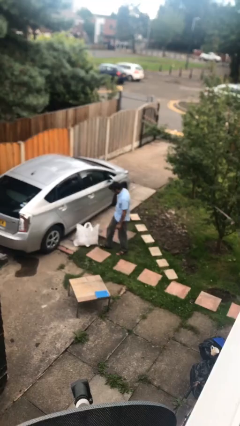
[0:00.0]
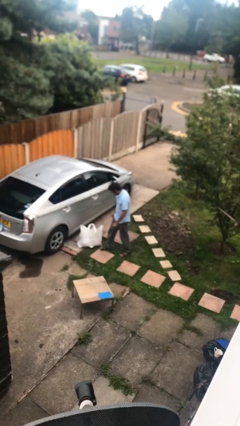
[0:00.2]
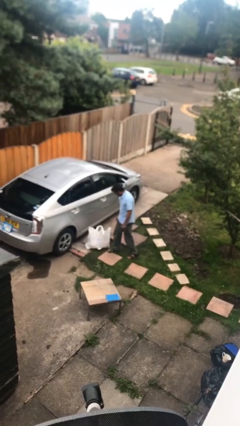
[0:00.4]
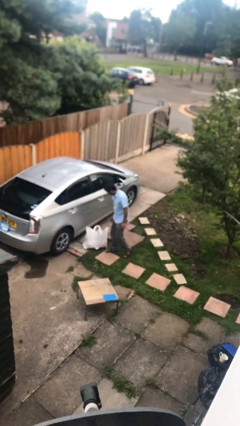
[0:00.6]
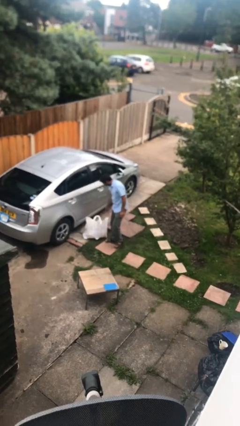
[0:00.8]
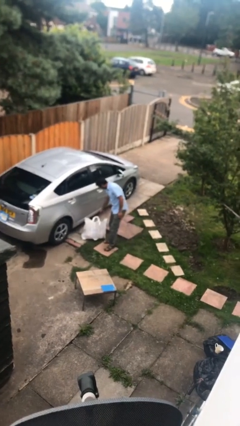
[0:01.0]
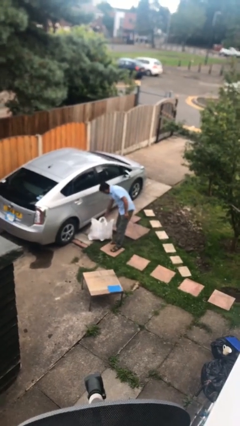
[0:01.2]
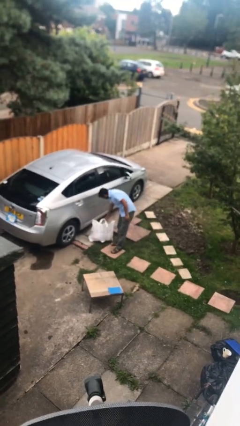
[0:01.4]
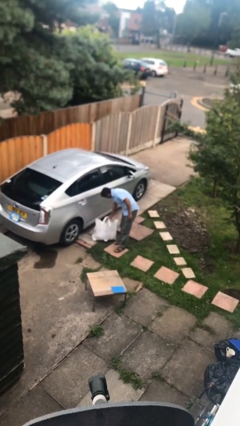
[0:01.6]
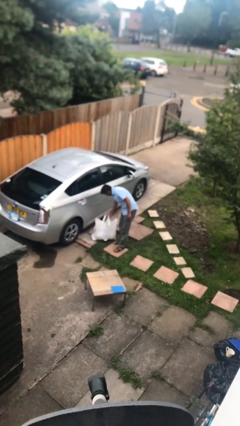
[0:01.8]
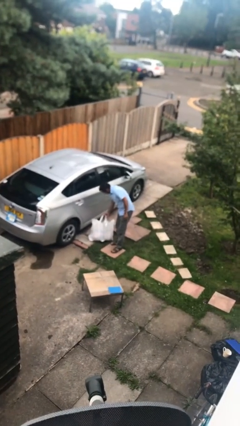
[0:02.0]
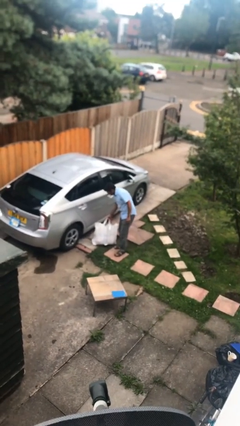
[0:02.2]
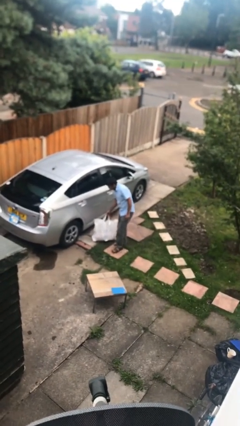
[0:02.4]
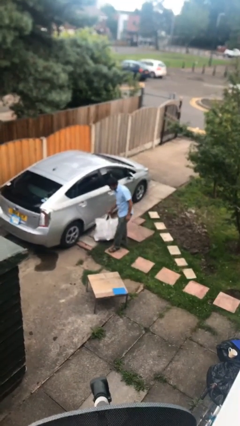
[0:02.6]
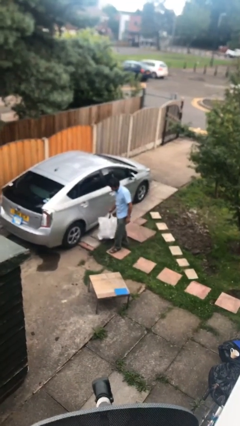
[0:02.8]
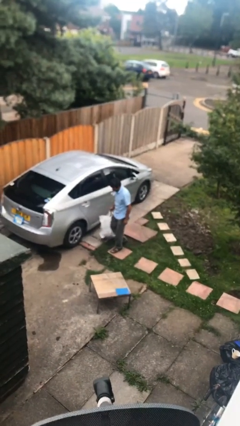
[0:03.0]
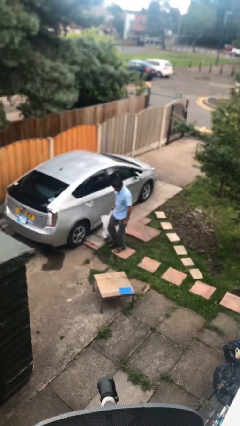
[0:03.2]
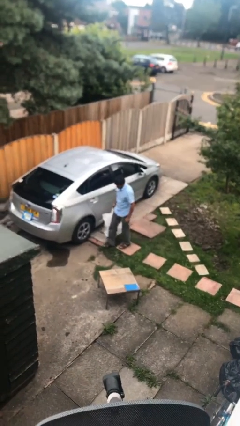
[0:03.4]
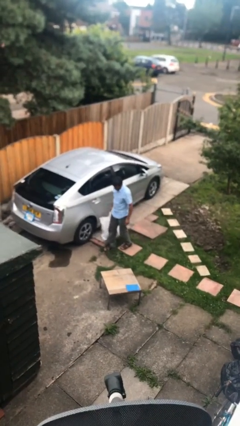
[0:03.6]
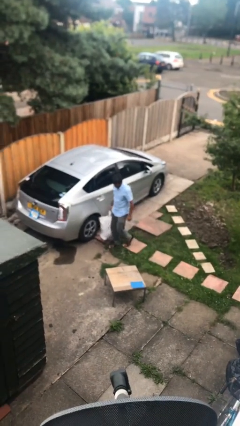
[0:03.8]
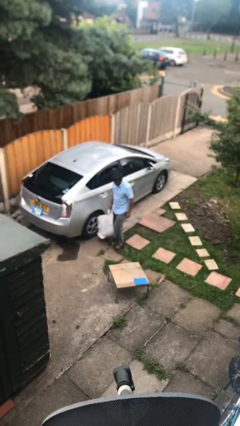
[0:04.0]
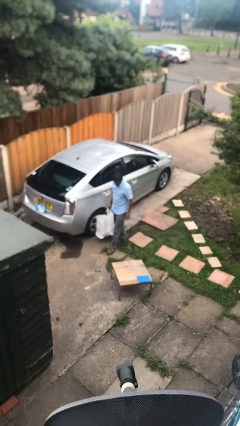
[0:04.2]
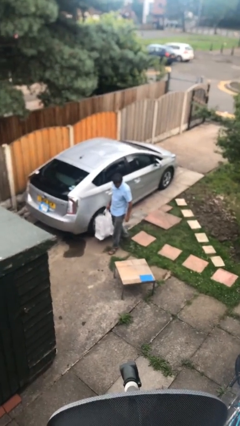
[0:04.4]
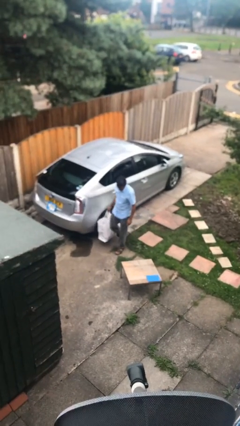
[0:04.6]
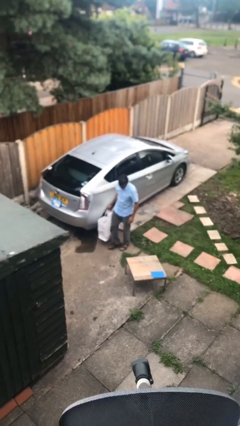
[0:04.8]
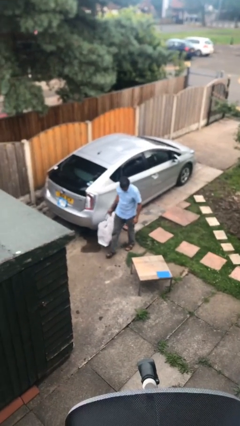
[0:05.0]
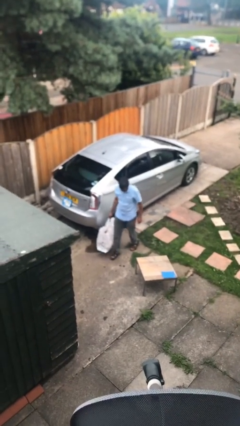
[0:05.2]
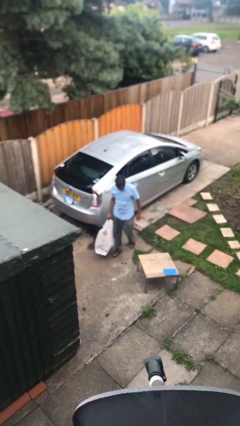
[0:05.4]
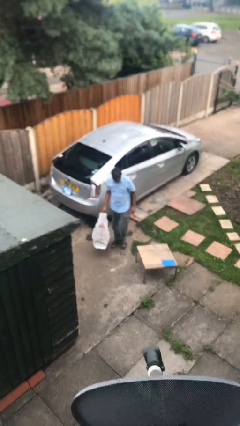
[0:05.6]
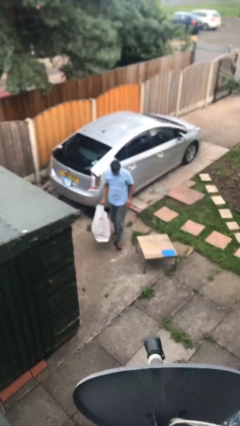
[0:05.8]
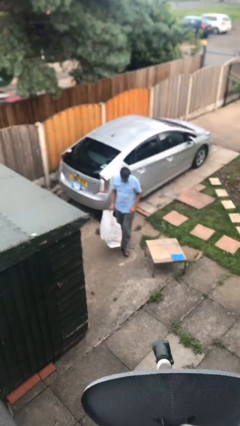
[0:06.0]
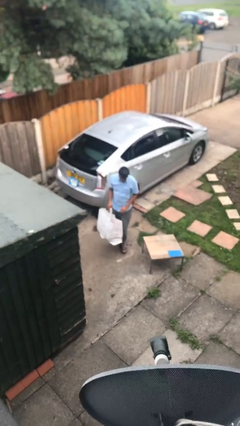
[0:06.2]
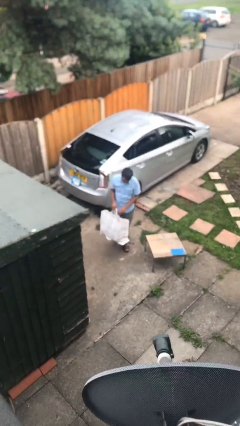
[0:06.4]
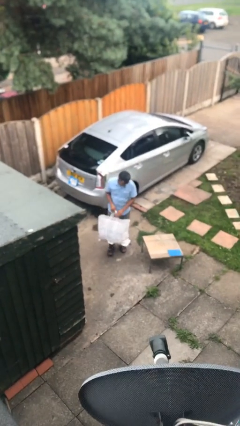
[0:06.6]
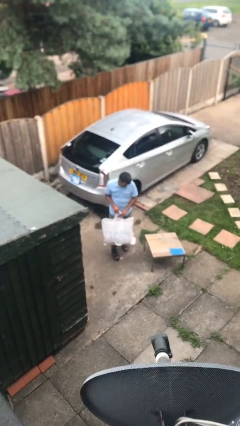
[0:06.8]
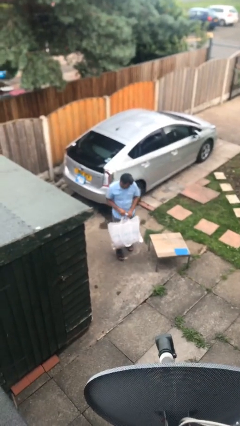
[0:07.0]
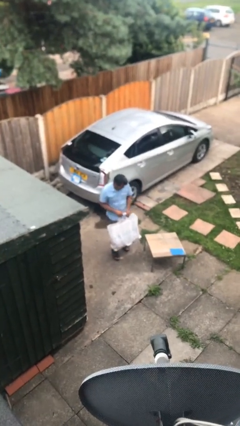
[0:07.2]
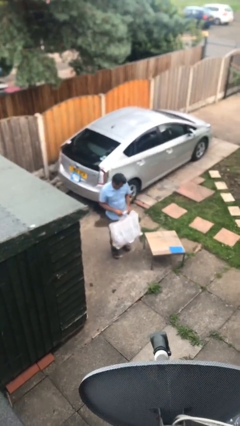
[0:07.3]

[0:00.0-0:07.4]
person picks up object from floor

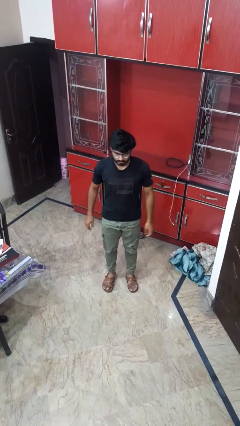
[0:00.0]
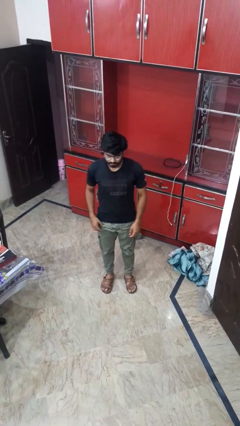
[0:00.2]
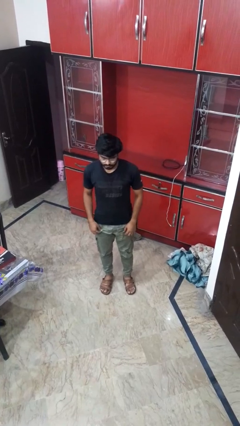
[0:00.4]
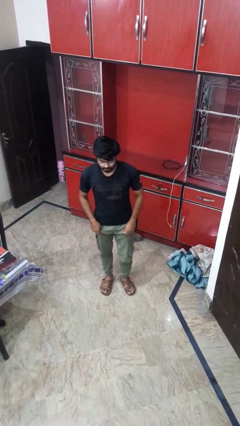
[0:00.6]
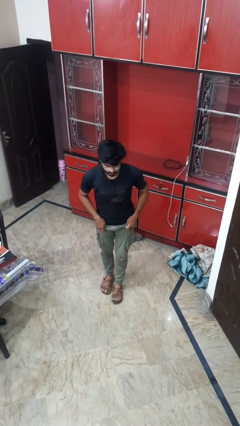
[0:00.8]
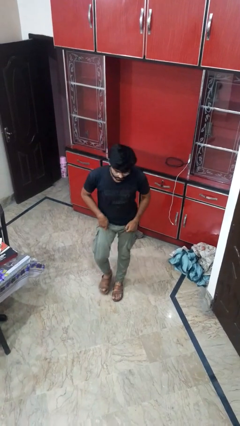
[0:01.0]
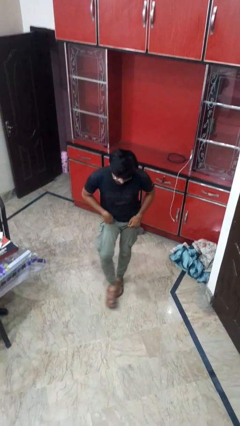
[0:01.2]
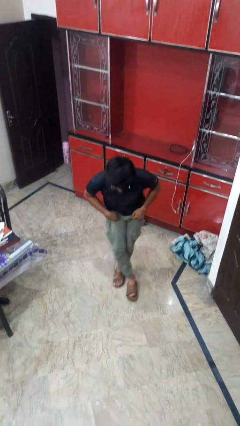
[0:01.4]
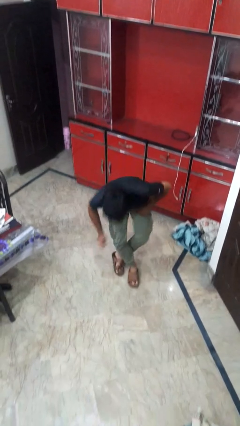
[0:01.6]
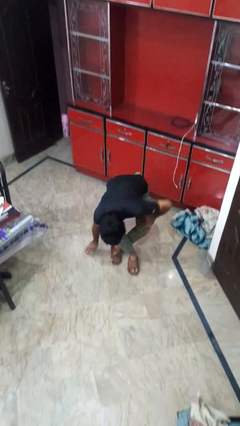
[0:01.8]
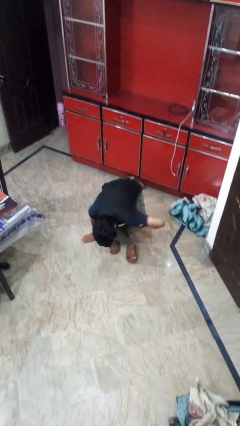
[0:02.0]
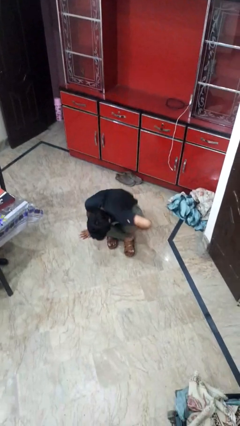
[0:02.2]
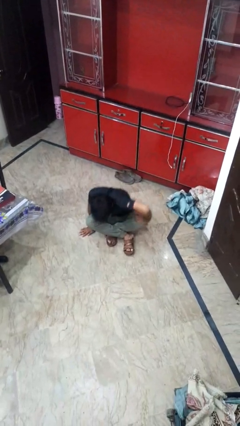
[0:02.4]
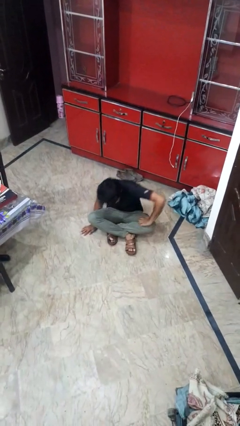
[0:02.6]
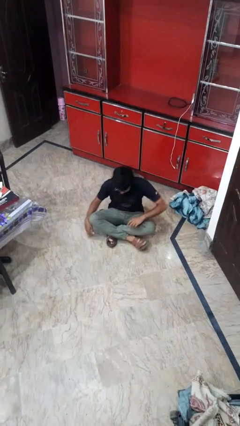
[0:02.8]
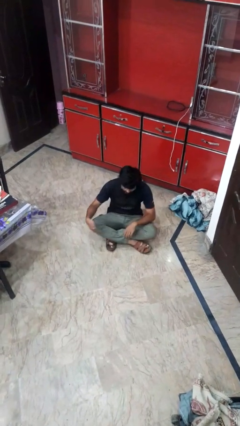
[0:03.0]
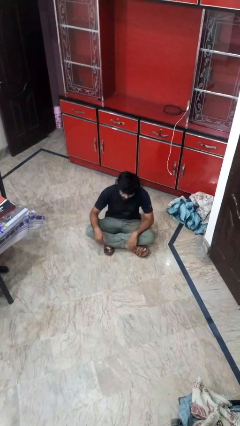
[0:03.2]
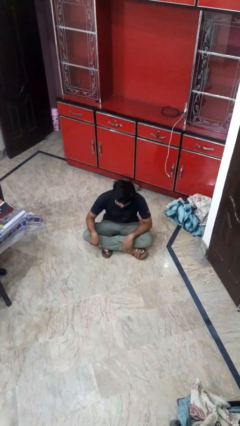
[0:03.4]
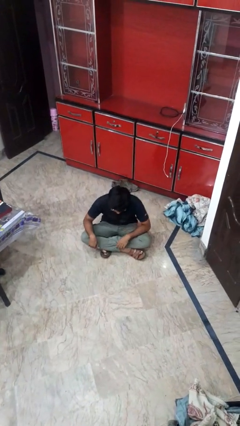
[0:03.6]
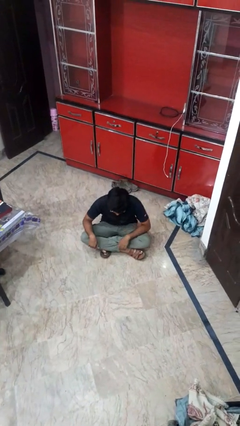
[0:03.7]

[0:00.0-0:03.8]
person sits crisscross

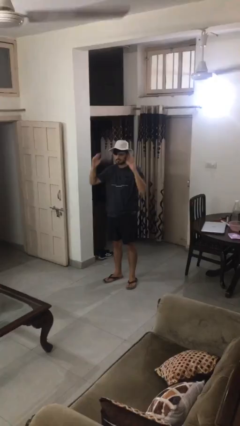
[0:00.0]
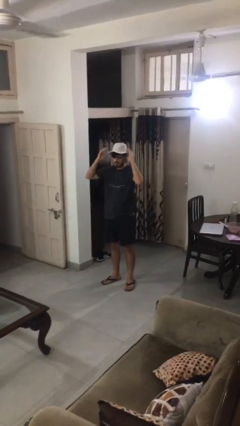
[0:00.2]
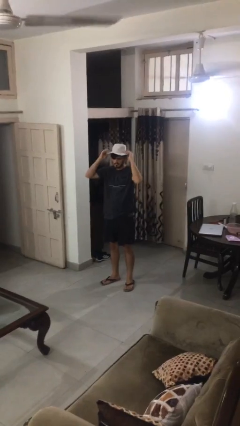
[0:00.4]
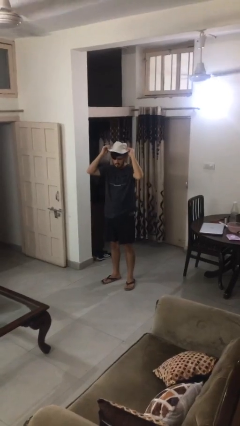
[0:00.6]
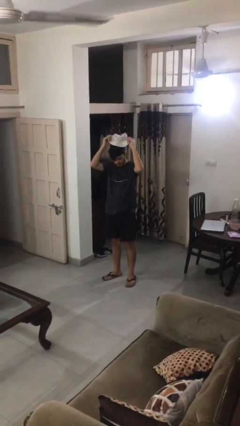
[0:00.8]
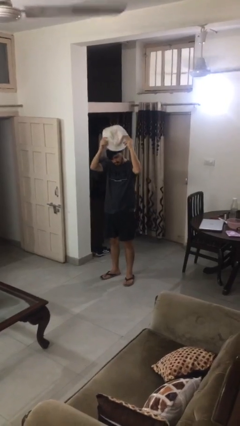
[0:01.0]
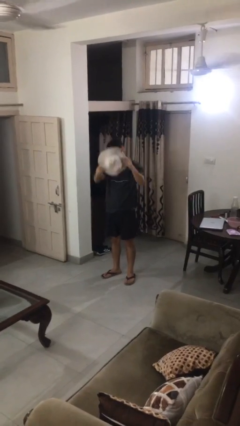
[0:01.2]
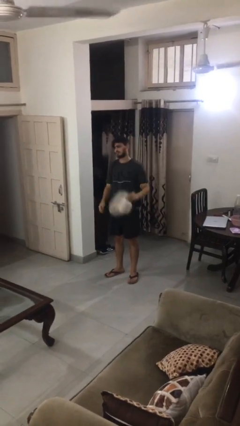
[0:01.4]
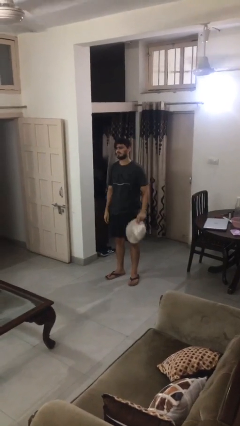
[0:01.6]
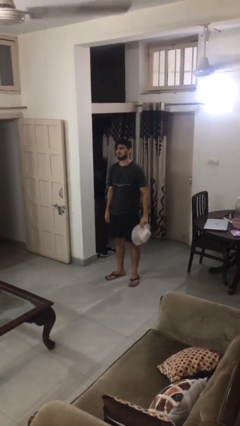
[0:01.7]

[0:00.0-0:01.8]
person takes off hat

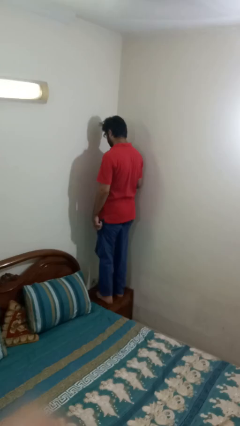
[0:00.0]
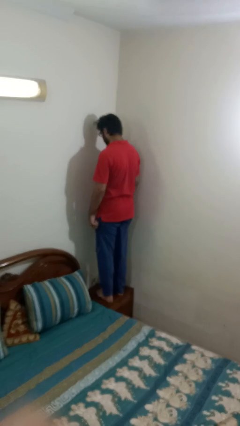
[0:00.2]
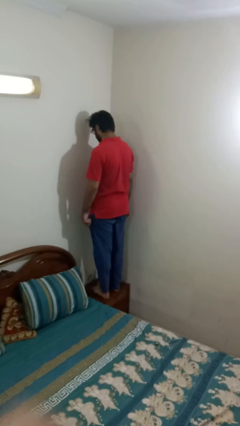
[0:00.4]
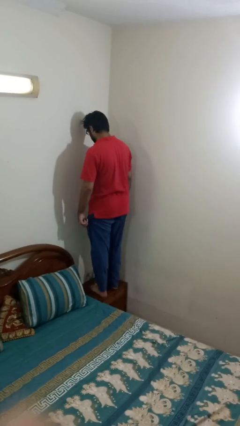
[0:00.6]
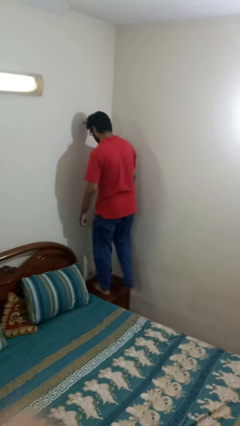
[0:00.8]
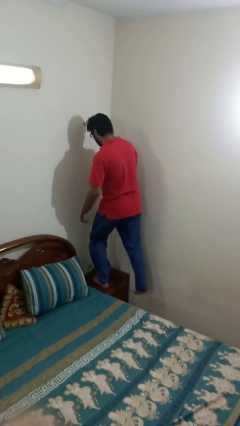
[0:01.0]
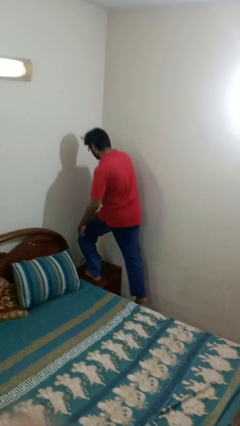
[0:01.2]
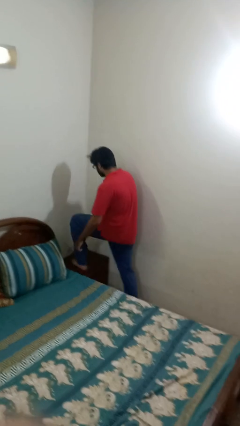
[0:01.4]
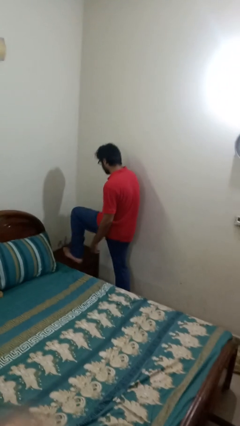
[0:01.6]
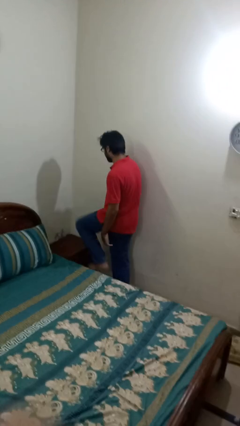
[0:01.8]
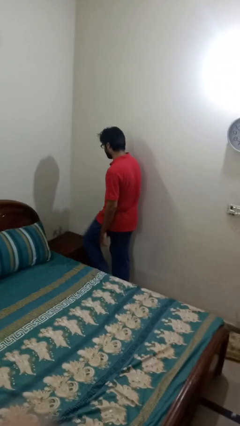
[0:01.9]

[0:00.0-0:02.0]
person climbs off table

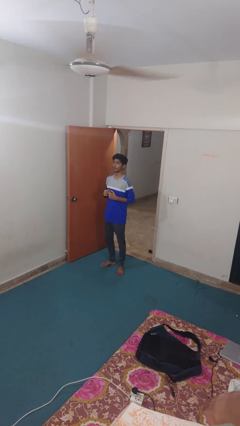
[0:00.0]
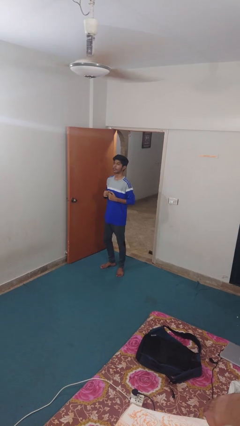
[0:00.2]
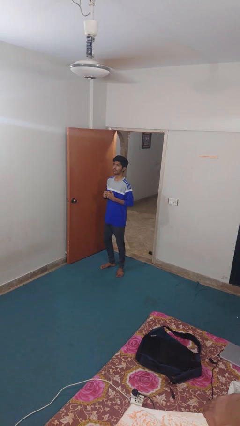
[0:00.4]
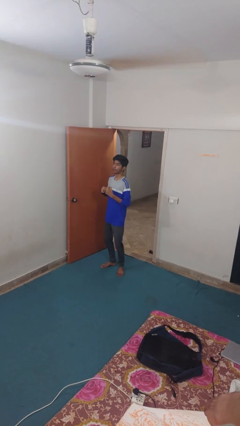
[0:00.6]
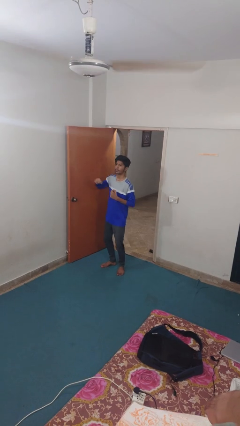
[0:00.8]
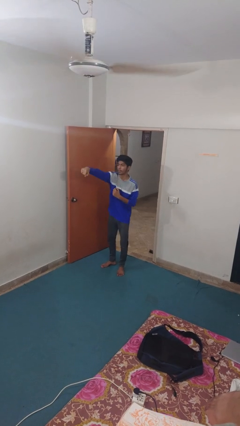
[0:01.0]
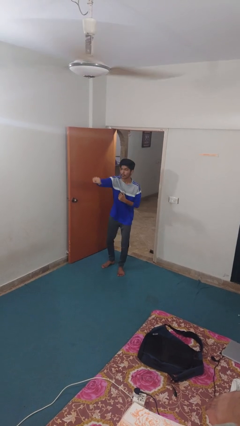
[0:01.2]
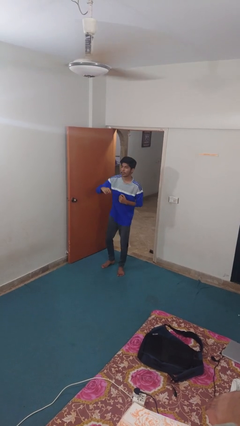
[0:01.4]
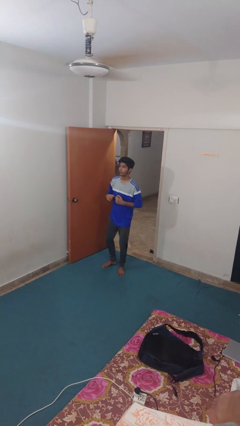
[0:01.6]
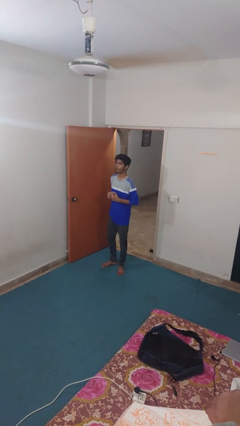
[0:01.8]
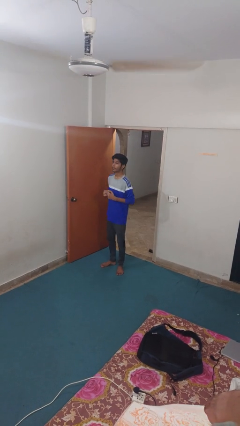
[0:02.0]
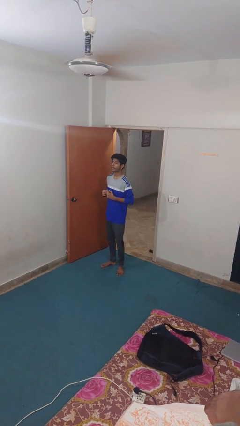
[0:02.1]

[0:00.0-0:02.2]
person punches

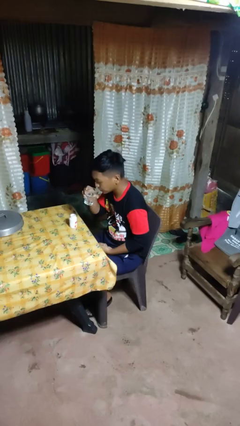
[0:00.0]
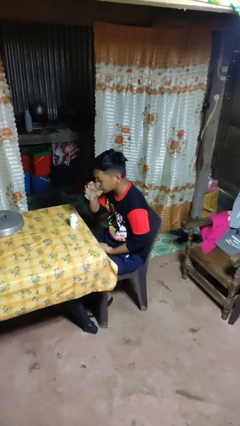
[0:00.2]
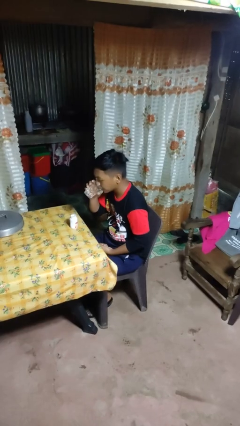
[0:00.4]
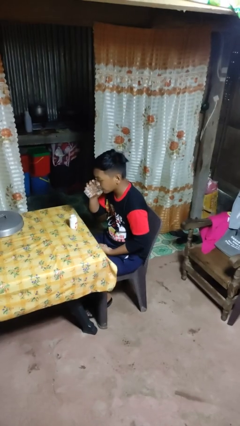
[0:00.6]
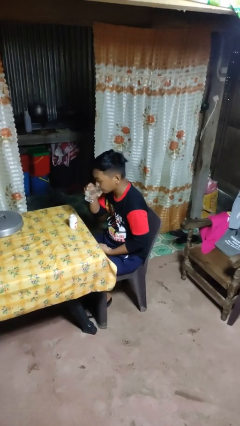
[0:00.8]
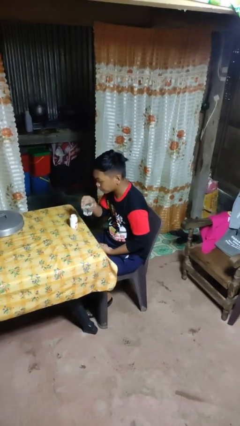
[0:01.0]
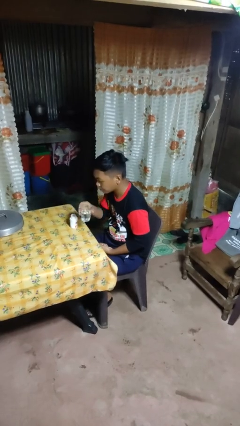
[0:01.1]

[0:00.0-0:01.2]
person drinks from cup
